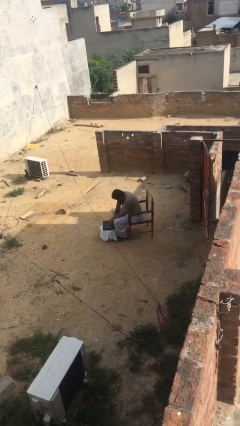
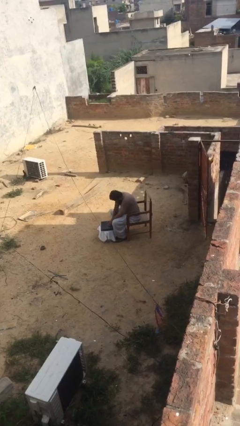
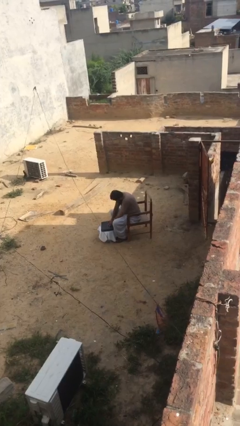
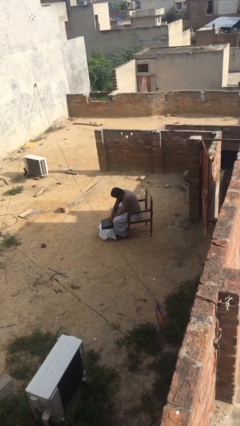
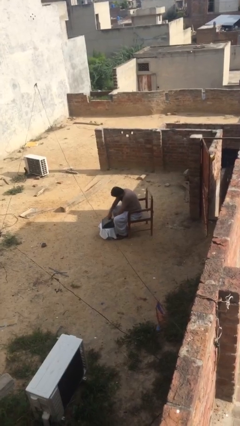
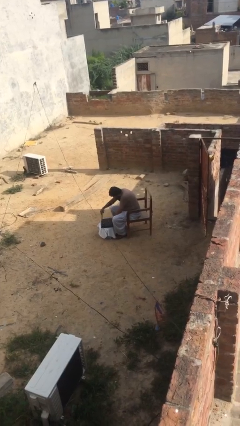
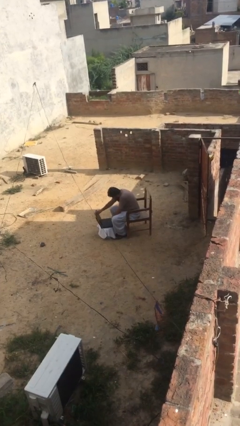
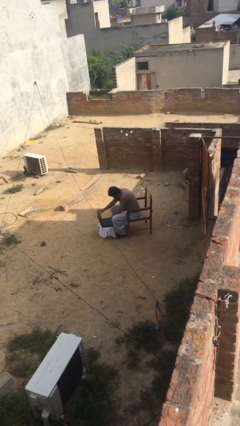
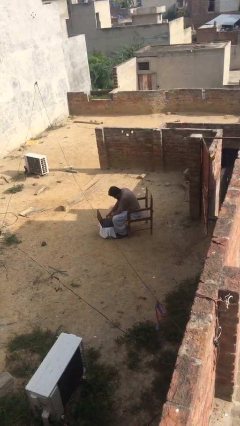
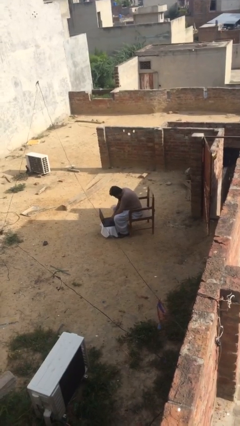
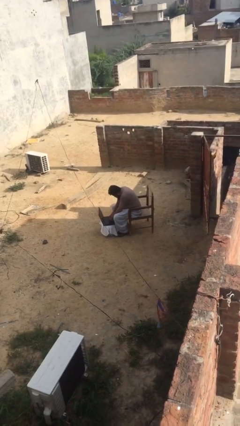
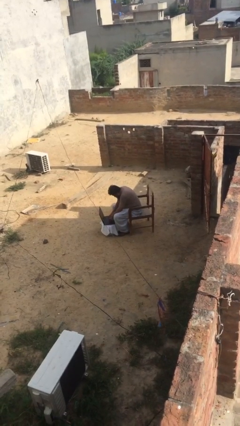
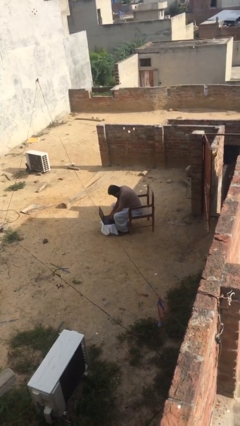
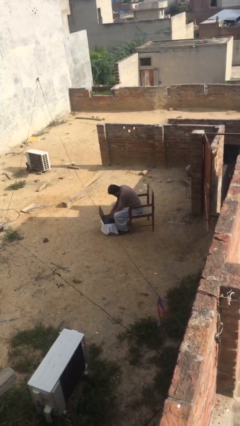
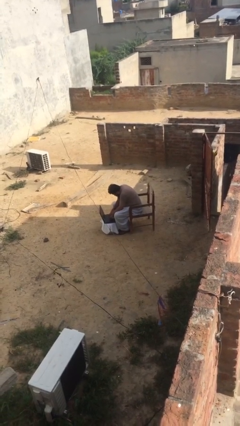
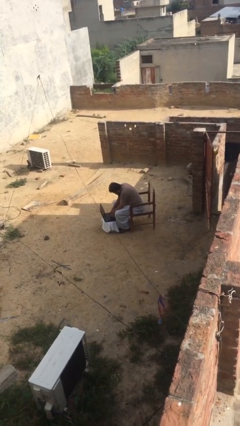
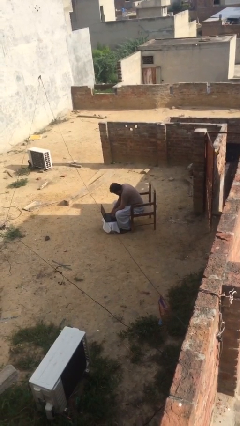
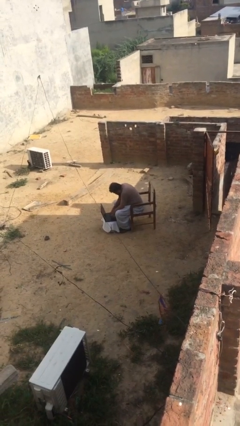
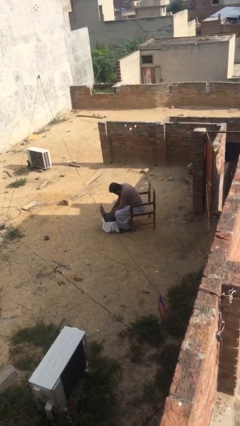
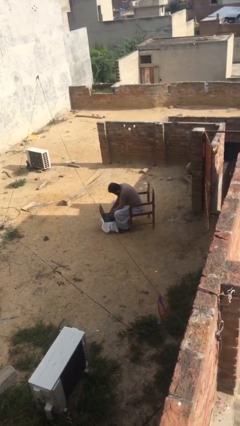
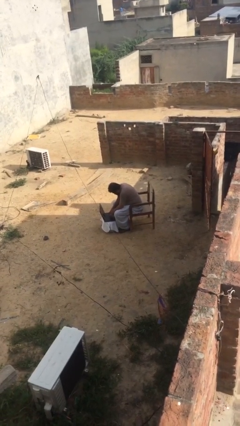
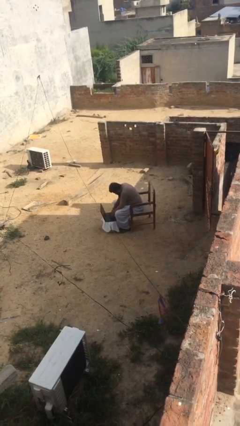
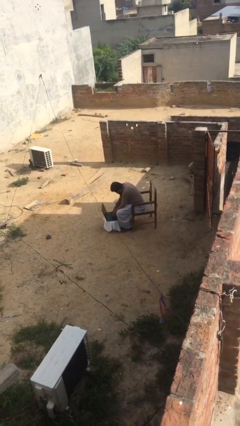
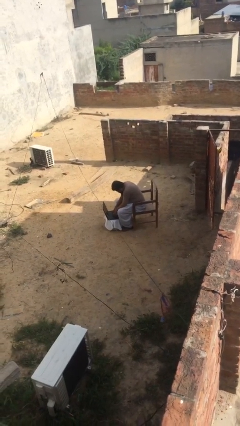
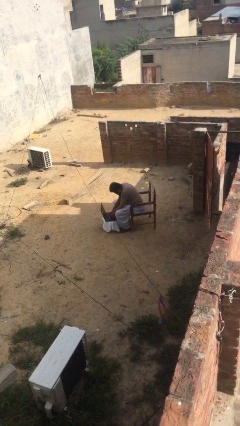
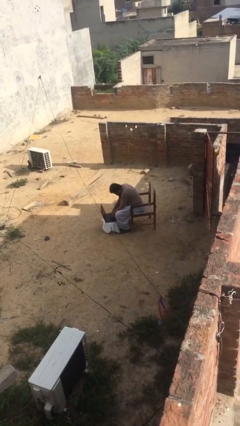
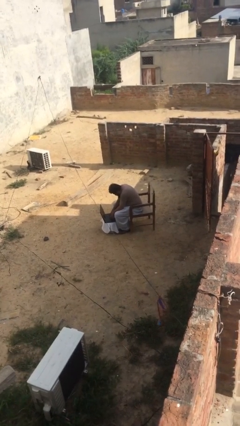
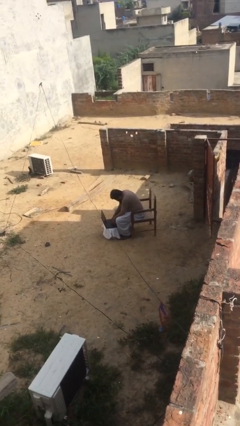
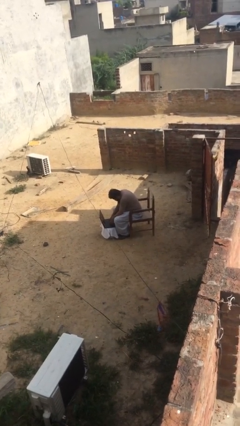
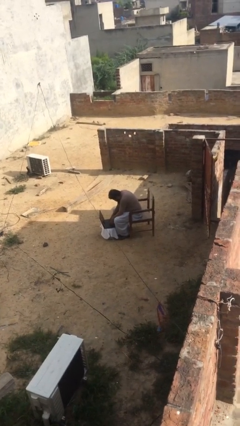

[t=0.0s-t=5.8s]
person interacts with laptop

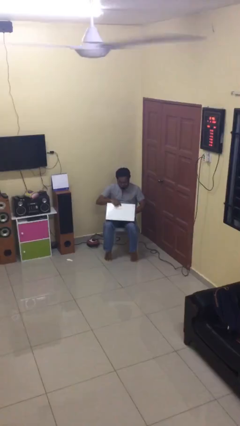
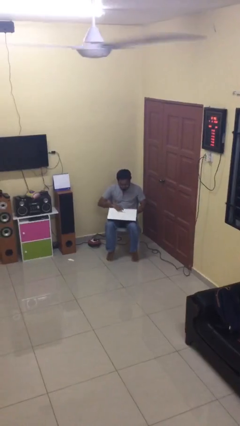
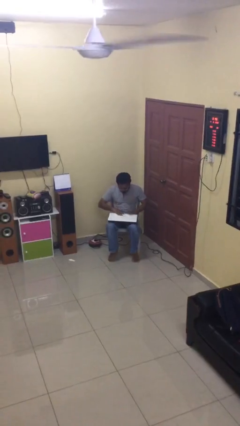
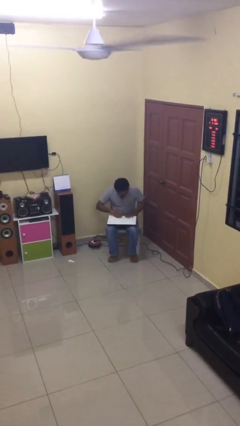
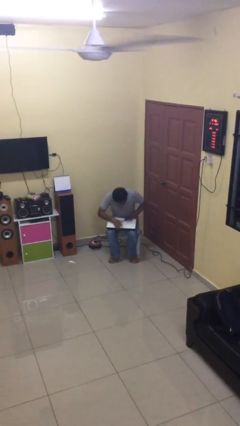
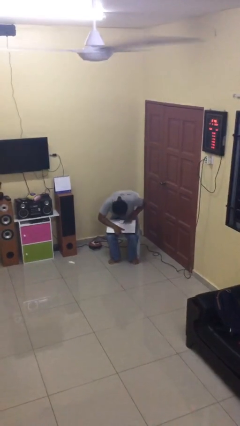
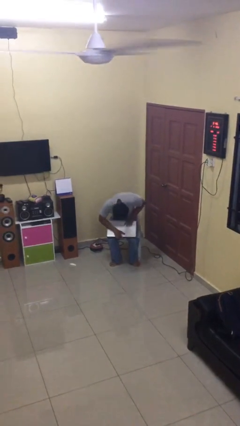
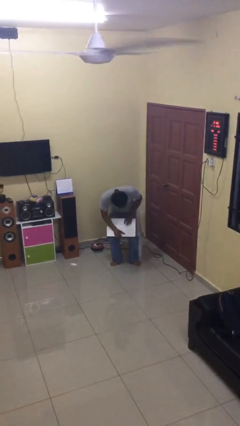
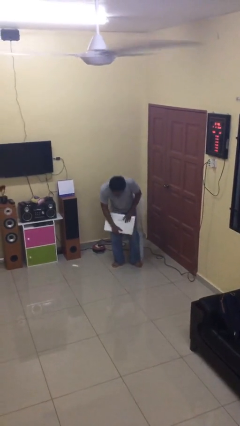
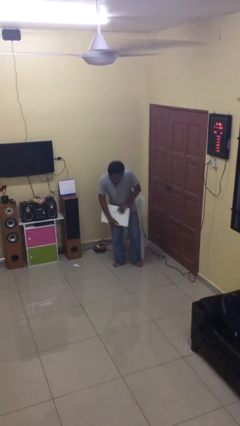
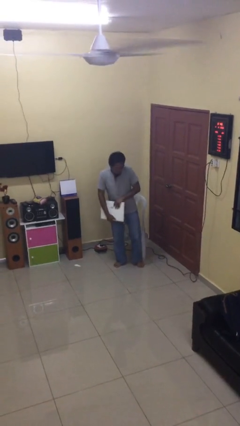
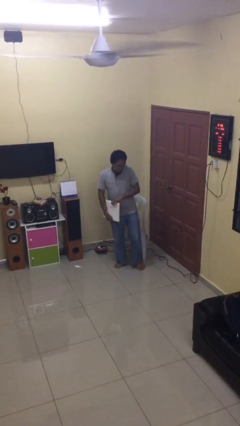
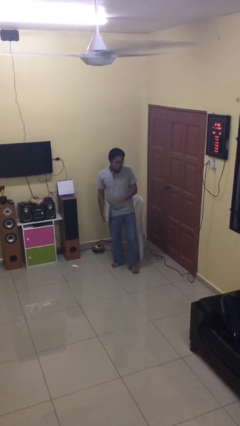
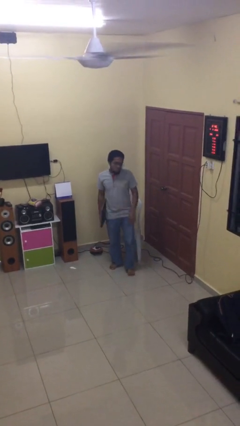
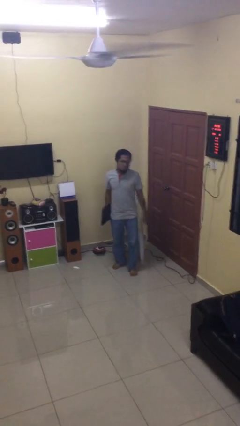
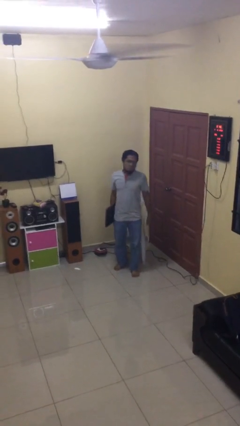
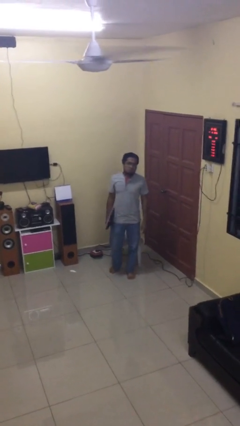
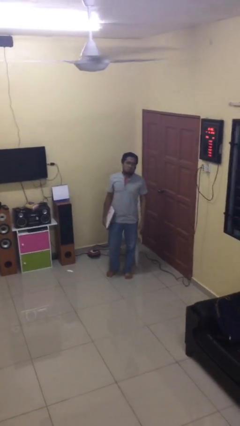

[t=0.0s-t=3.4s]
person stands up

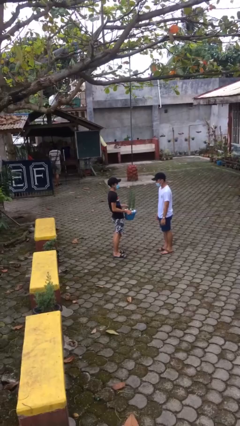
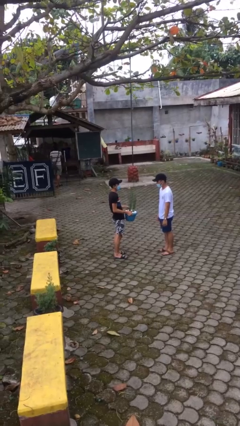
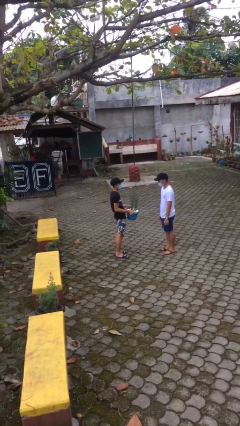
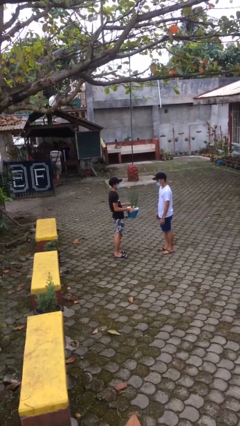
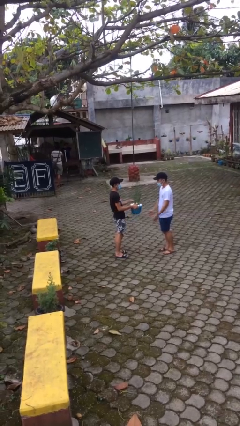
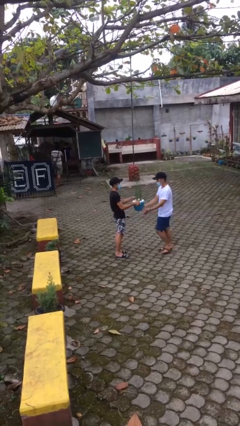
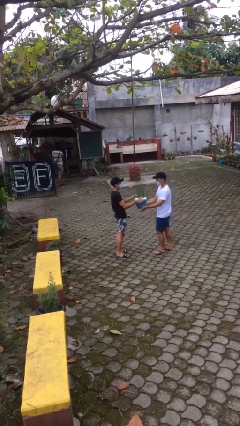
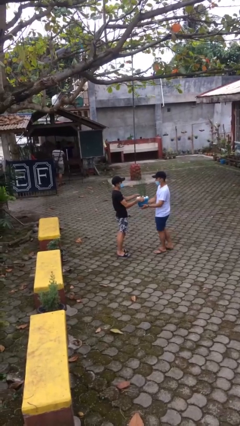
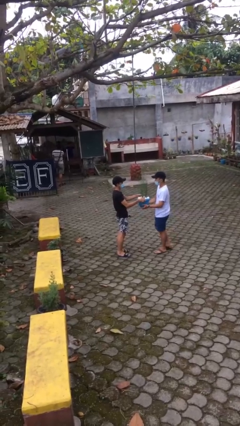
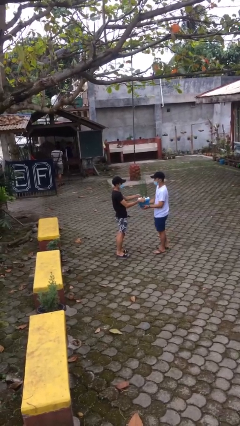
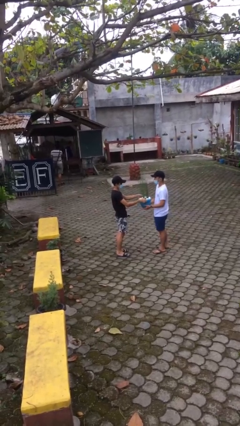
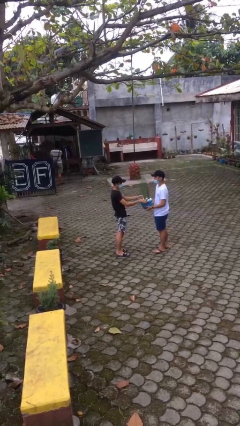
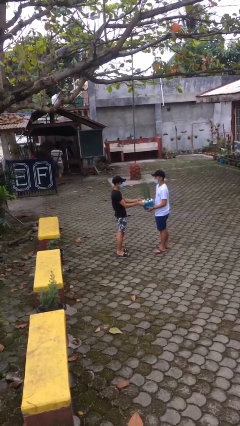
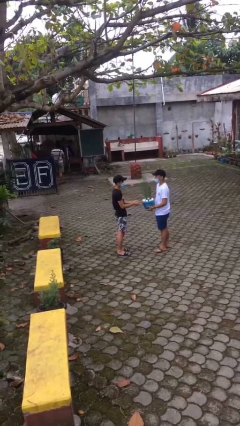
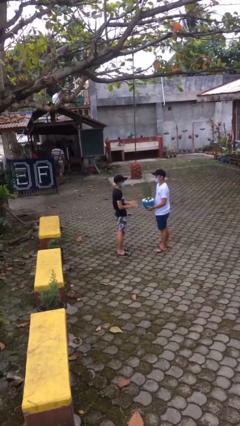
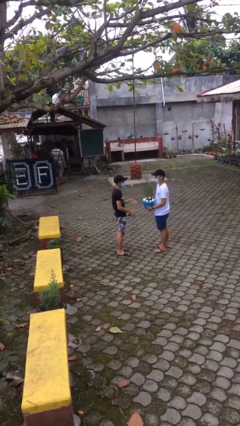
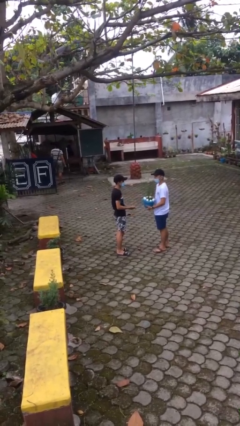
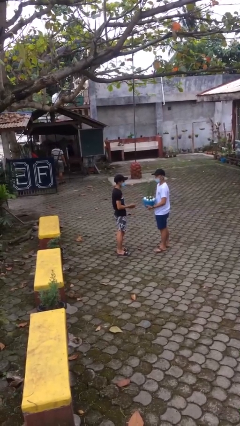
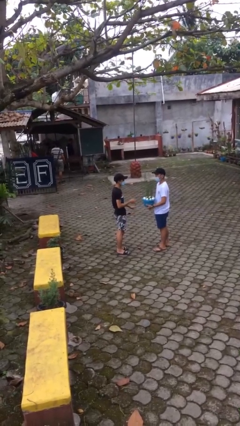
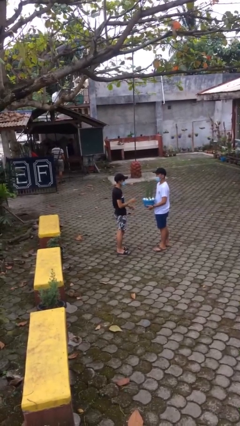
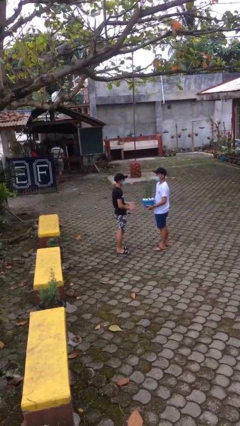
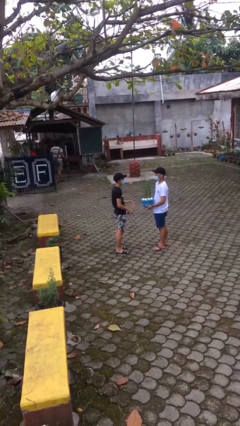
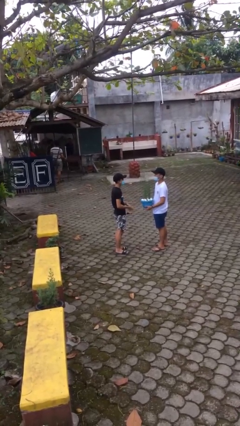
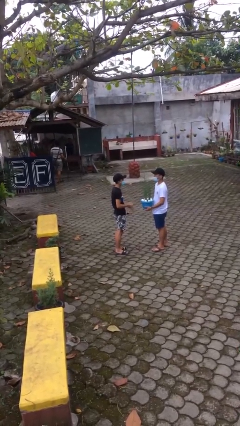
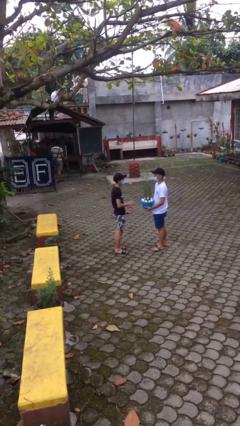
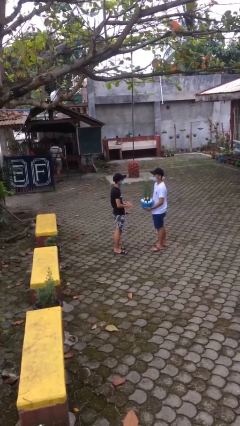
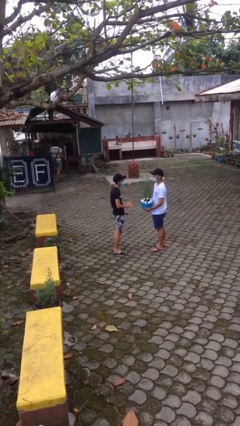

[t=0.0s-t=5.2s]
person transfers object to person

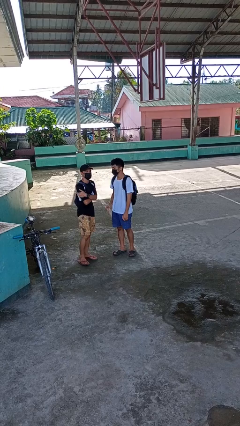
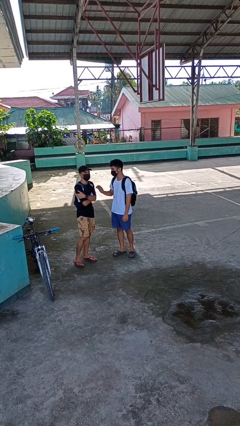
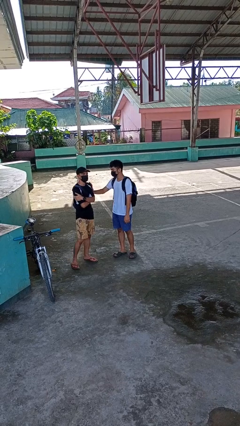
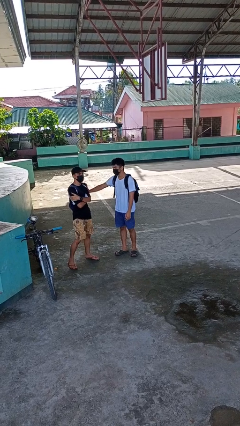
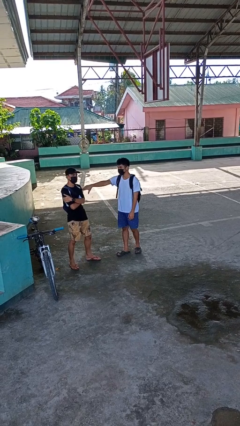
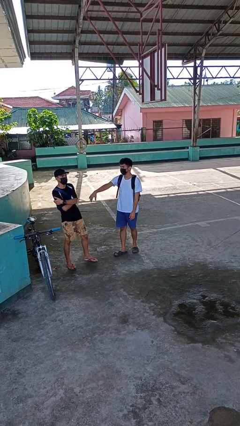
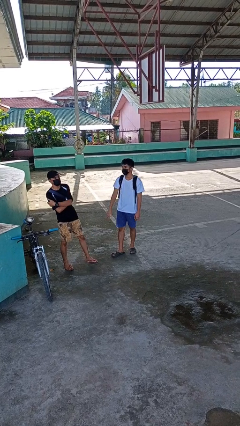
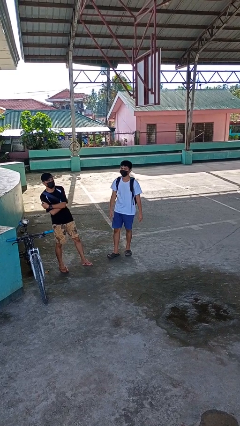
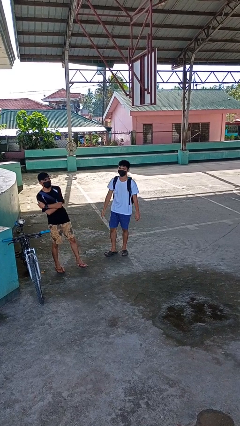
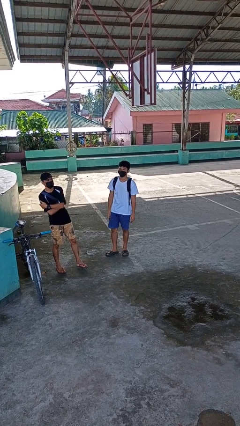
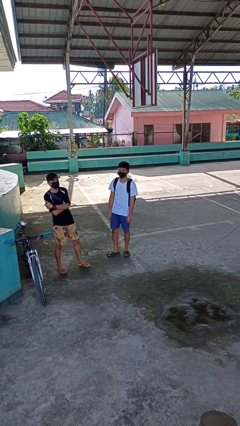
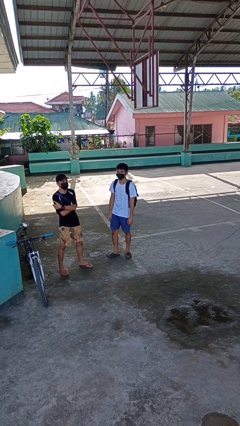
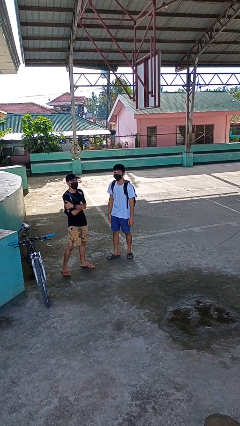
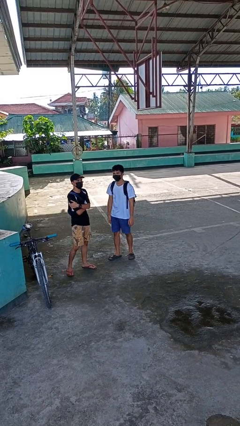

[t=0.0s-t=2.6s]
person shoves person

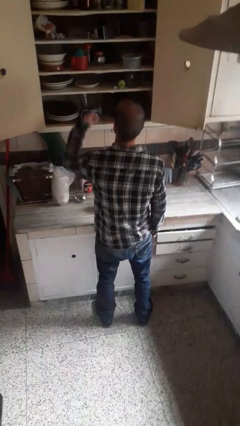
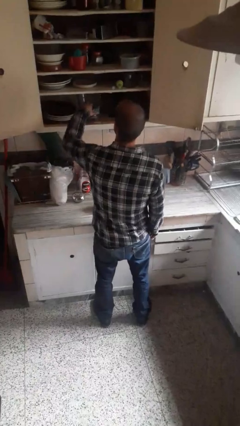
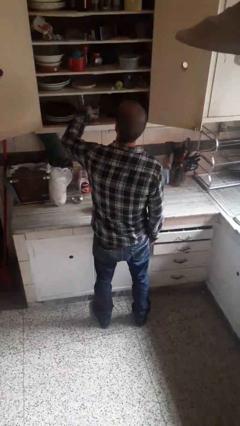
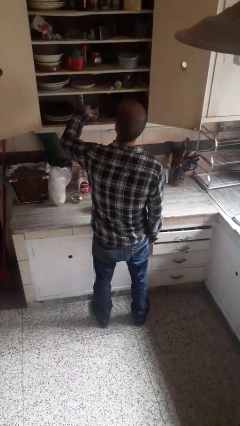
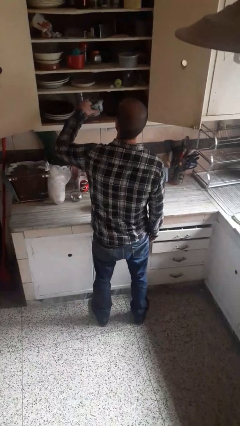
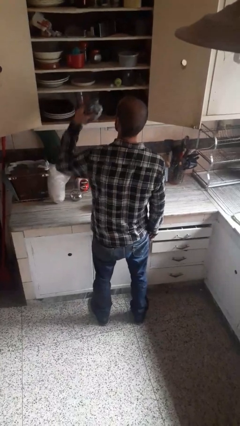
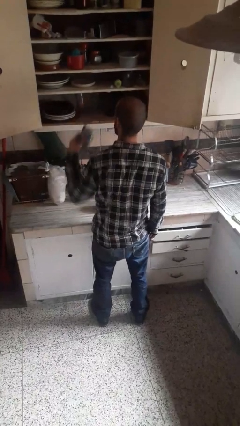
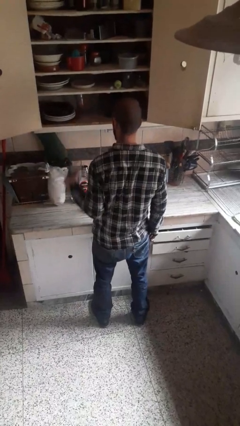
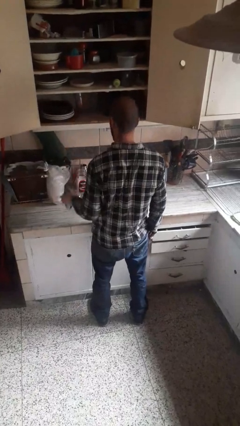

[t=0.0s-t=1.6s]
person takes object from cabinet
